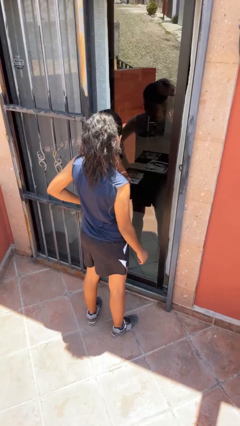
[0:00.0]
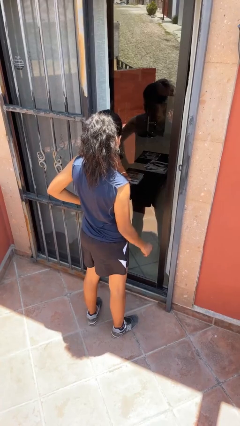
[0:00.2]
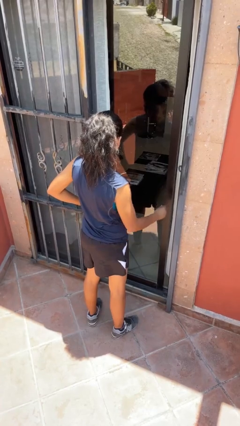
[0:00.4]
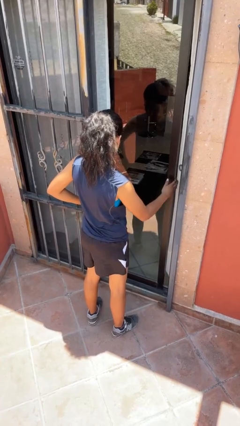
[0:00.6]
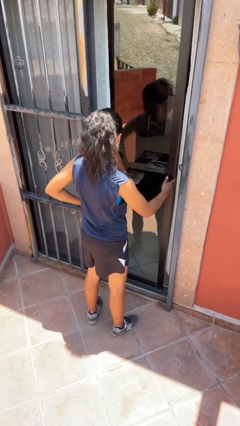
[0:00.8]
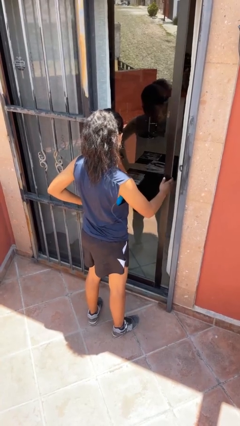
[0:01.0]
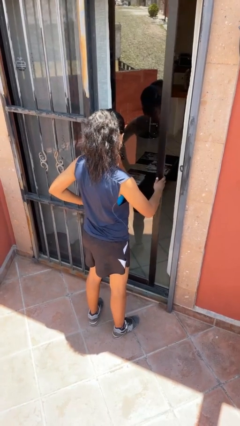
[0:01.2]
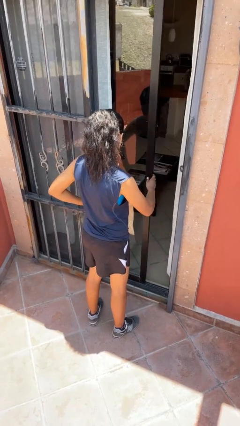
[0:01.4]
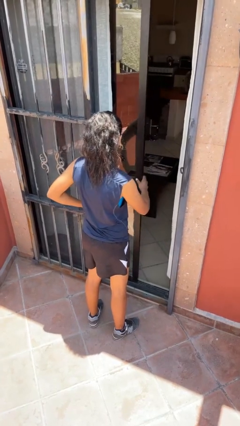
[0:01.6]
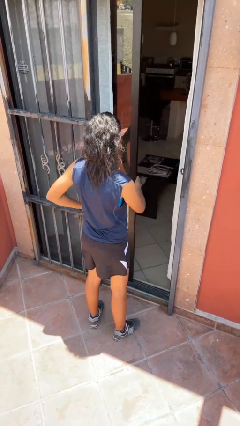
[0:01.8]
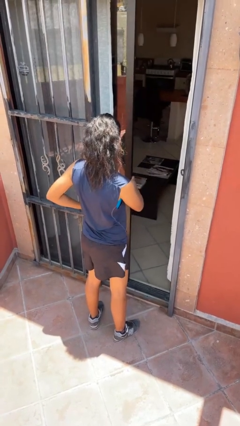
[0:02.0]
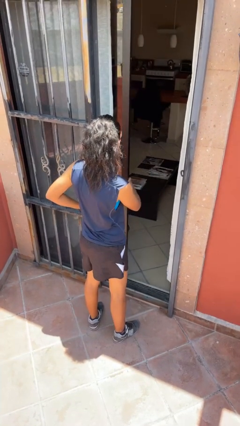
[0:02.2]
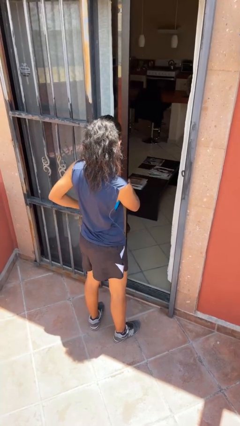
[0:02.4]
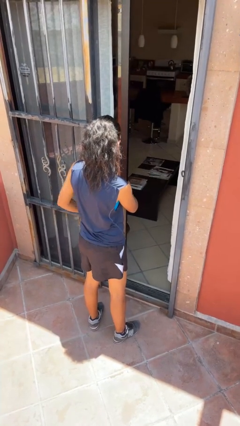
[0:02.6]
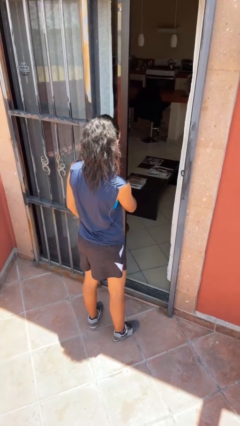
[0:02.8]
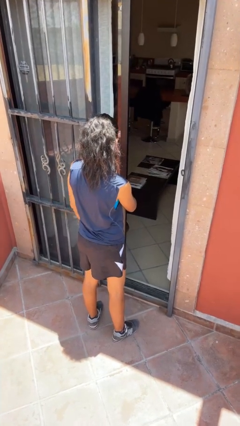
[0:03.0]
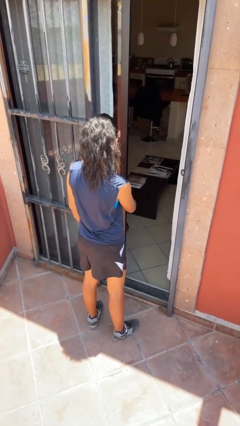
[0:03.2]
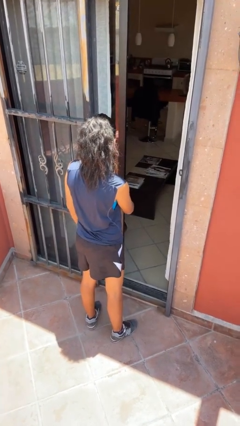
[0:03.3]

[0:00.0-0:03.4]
person opens sliding door

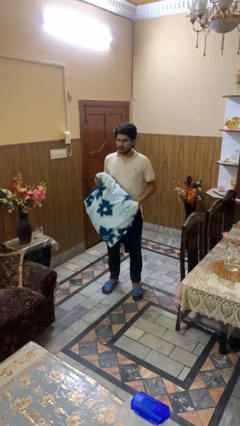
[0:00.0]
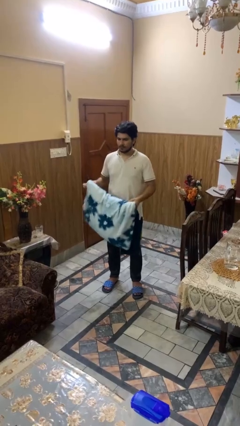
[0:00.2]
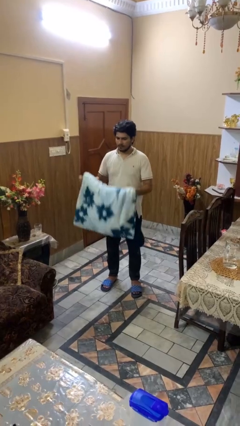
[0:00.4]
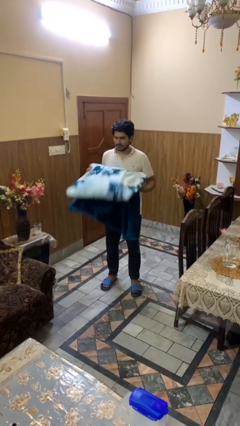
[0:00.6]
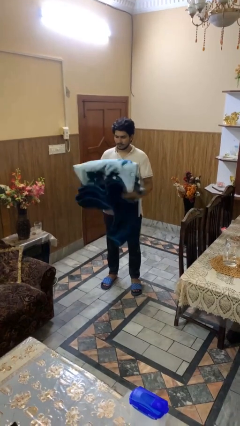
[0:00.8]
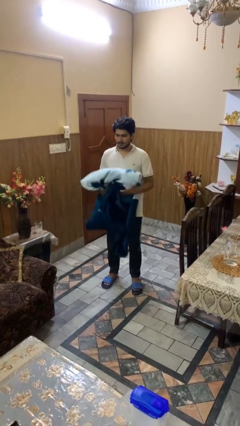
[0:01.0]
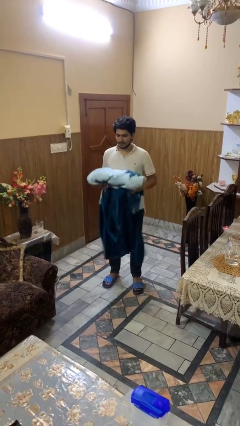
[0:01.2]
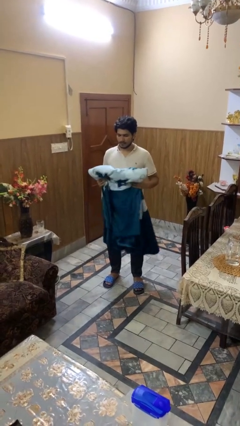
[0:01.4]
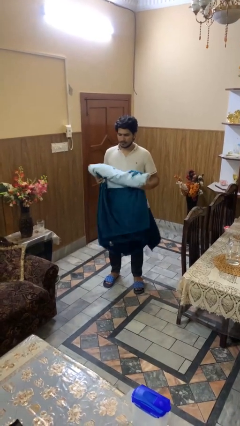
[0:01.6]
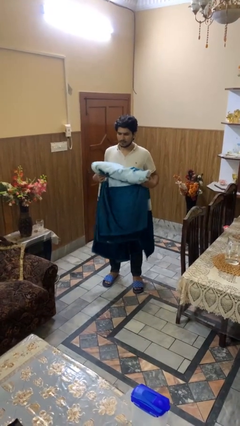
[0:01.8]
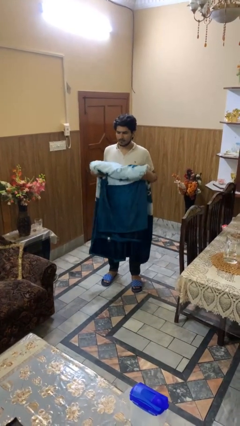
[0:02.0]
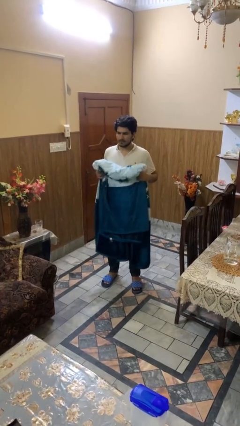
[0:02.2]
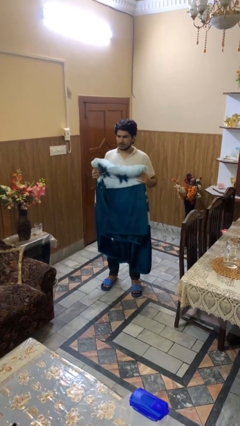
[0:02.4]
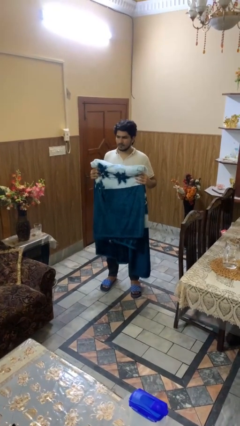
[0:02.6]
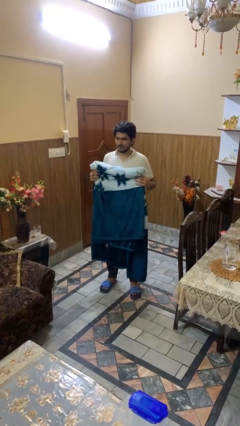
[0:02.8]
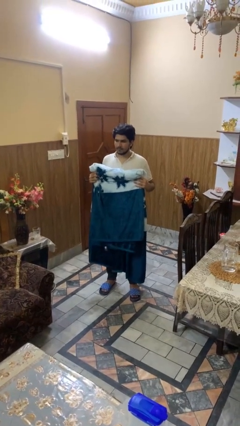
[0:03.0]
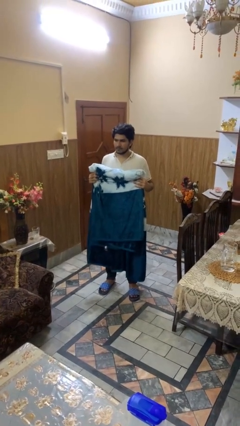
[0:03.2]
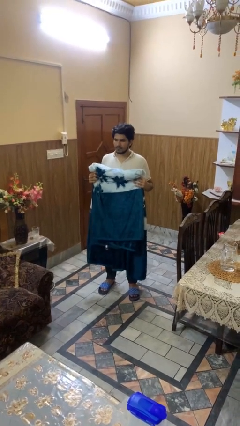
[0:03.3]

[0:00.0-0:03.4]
person unfolds blanket

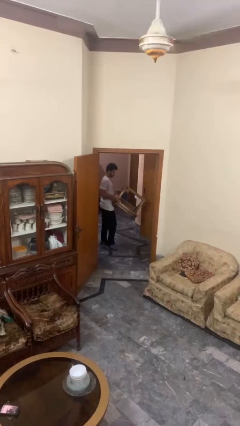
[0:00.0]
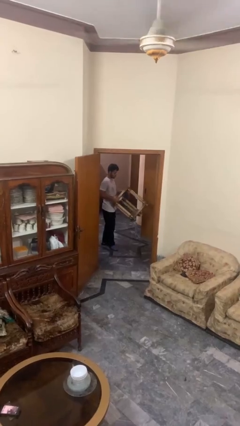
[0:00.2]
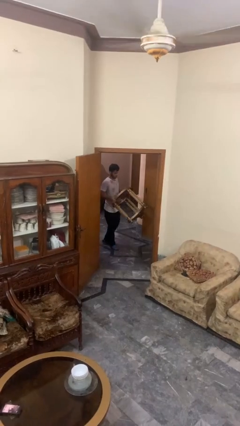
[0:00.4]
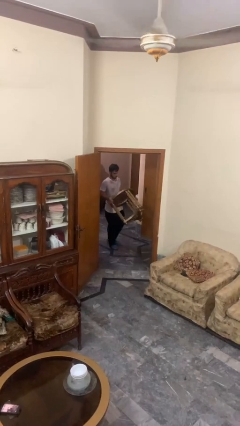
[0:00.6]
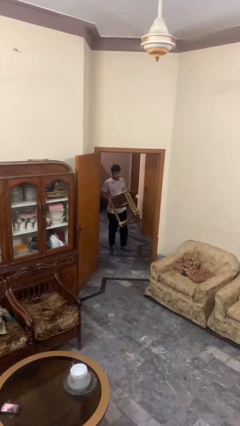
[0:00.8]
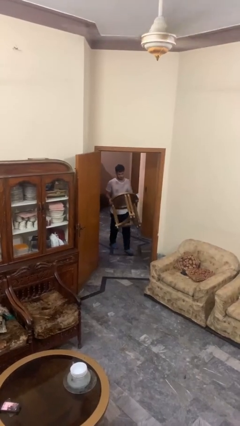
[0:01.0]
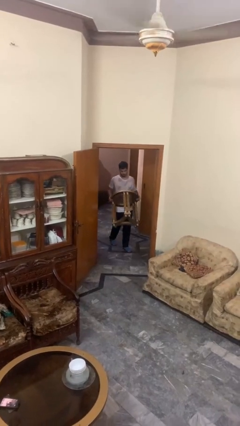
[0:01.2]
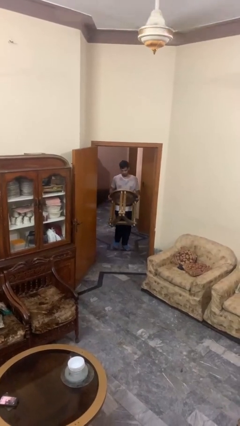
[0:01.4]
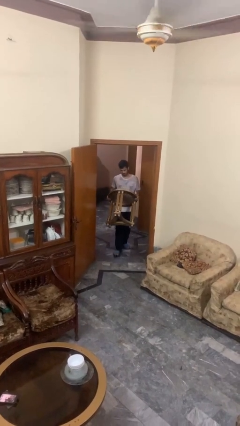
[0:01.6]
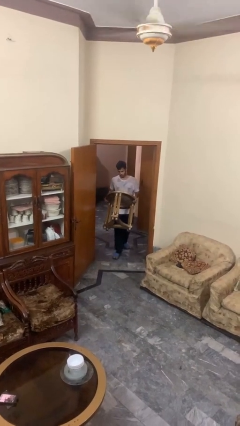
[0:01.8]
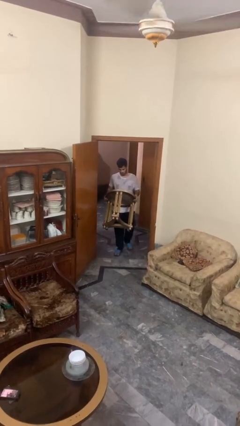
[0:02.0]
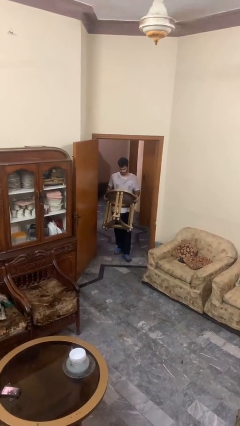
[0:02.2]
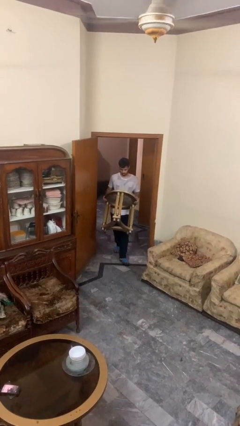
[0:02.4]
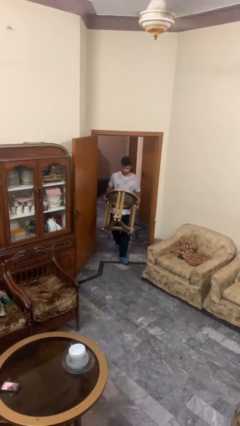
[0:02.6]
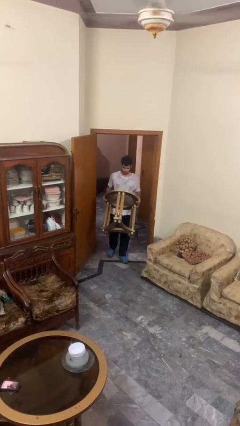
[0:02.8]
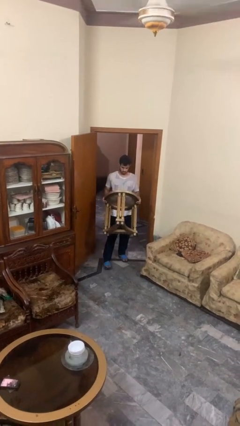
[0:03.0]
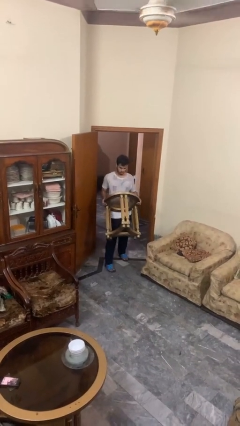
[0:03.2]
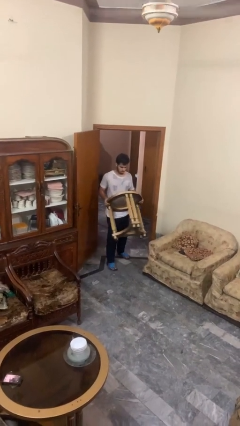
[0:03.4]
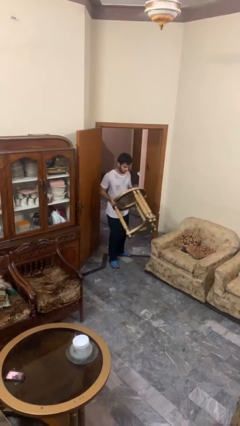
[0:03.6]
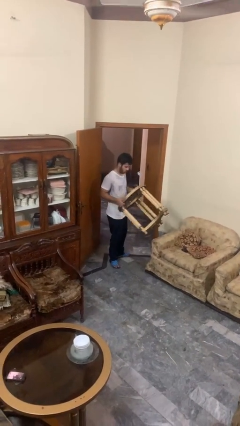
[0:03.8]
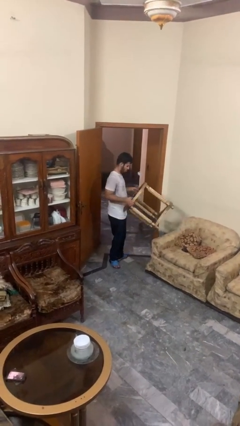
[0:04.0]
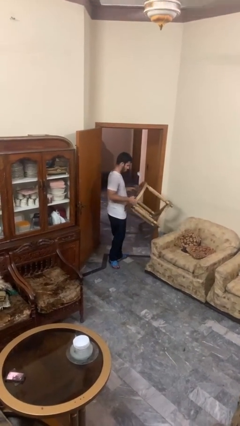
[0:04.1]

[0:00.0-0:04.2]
person carries furniture

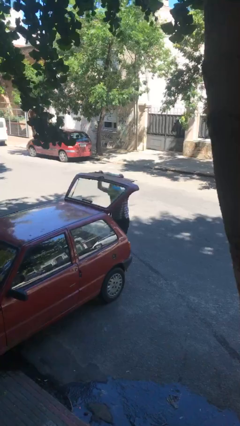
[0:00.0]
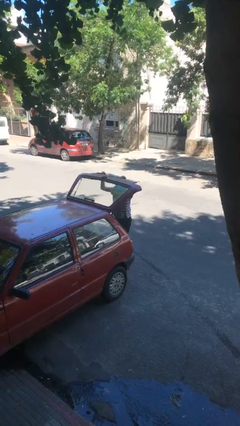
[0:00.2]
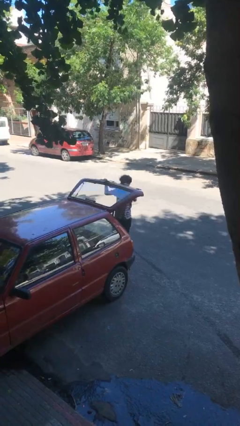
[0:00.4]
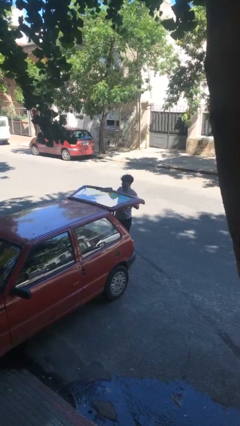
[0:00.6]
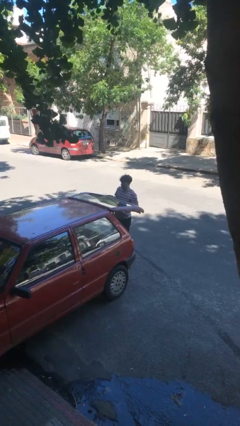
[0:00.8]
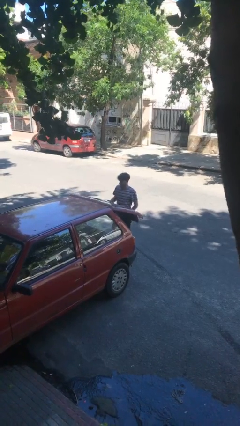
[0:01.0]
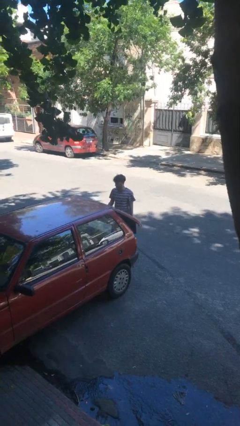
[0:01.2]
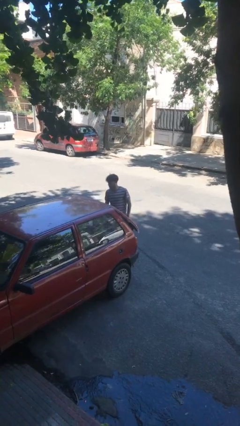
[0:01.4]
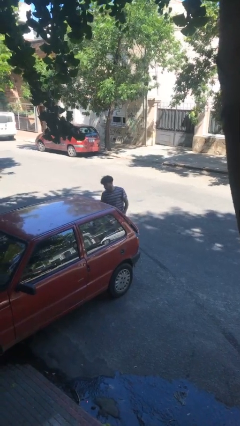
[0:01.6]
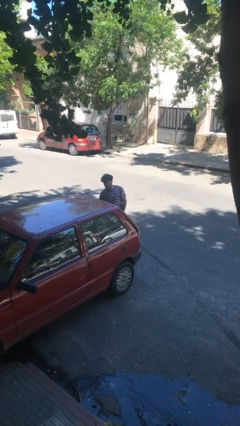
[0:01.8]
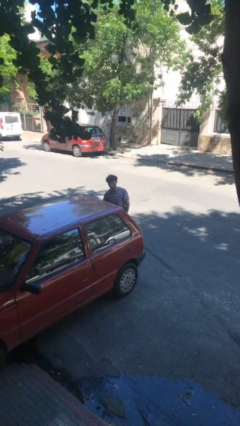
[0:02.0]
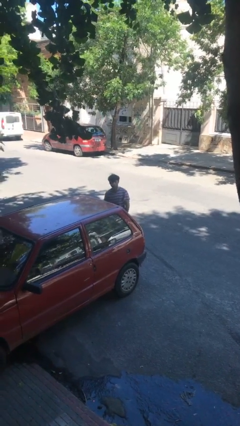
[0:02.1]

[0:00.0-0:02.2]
person closes car trunk

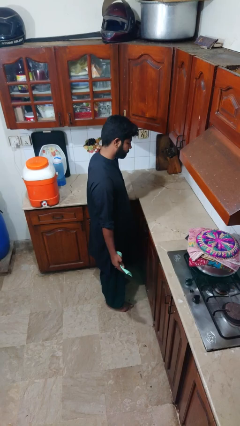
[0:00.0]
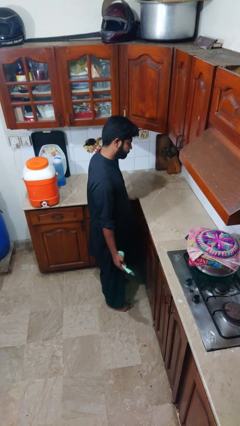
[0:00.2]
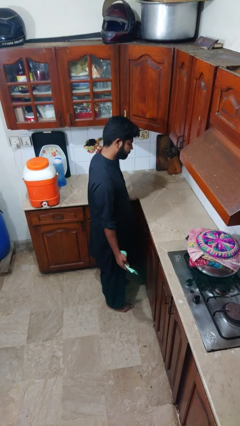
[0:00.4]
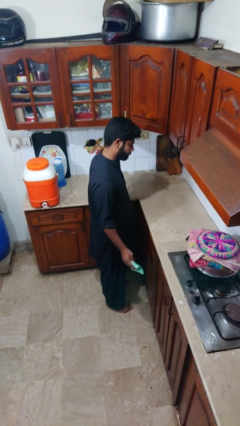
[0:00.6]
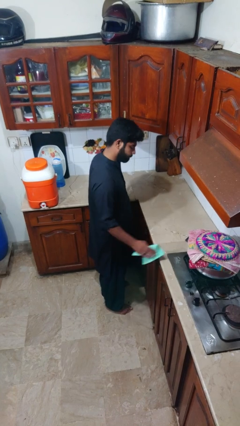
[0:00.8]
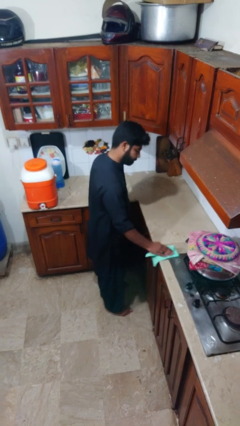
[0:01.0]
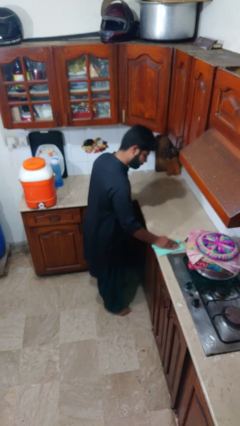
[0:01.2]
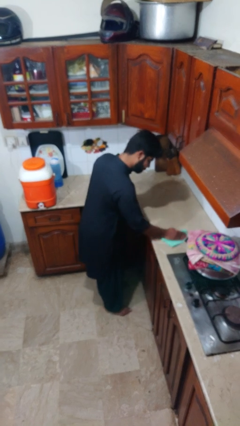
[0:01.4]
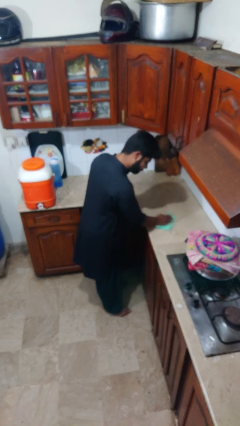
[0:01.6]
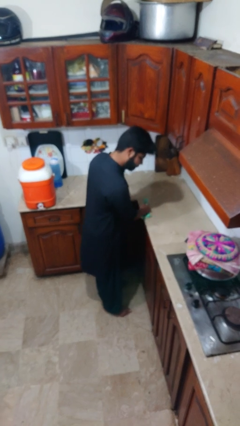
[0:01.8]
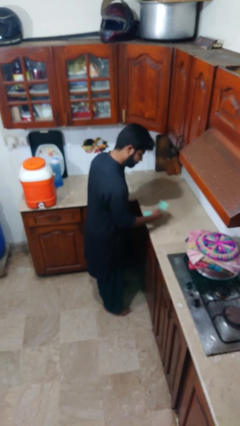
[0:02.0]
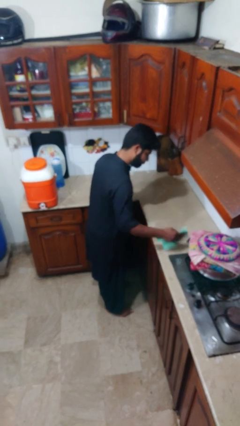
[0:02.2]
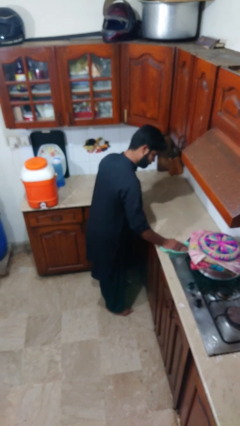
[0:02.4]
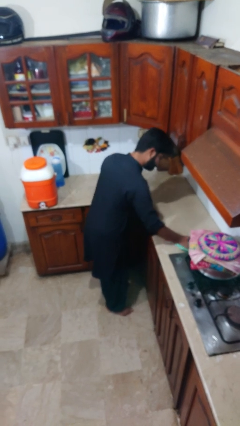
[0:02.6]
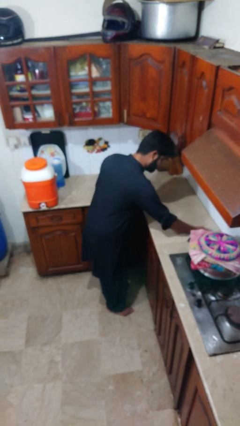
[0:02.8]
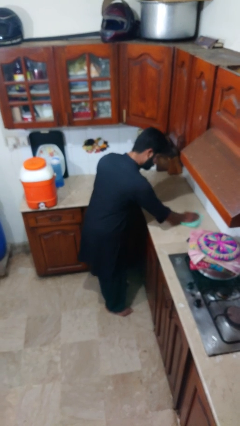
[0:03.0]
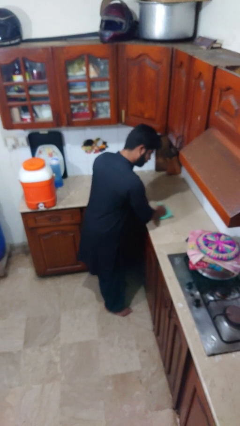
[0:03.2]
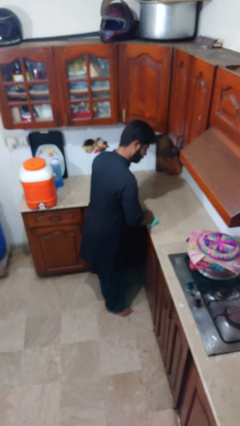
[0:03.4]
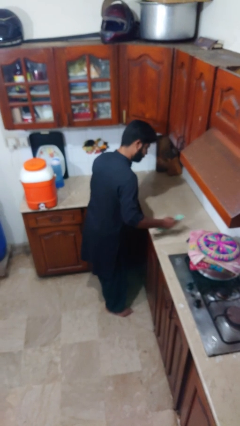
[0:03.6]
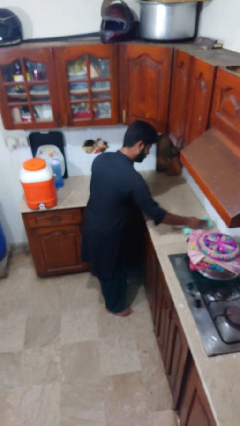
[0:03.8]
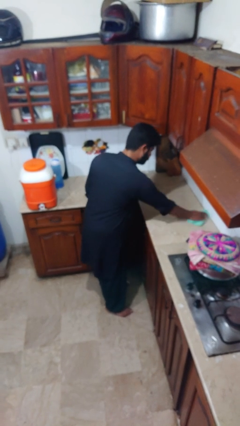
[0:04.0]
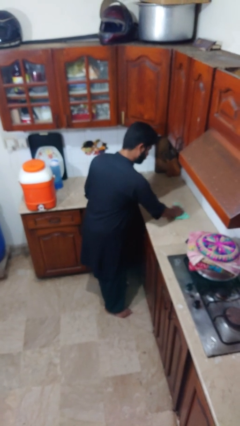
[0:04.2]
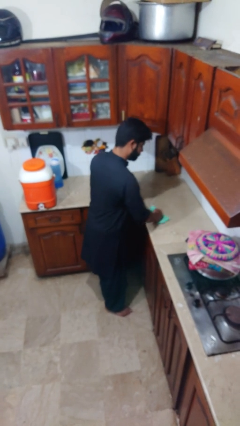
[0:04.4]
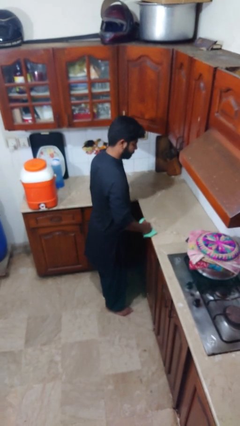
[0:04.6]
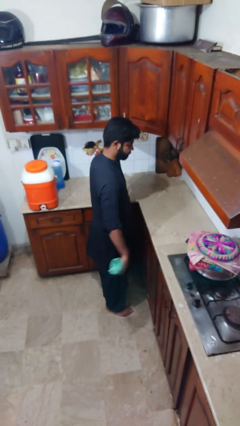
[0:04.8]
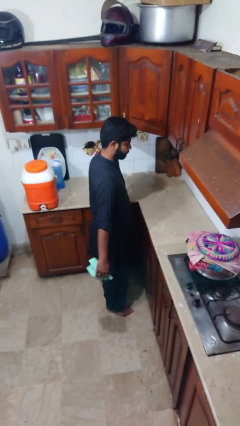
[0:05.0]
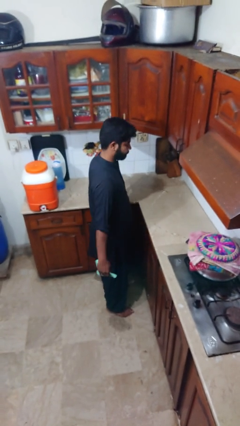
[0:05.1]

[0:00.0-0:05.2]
person cleans table with rag
